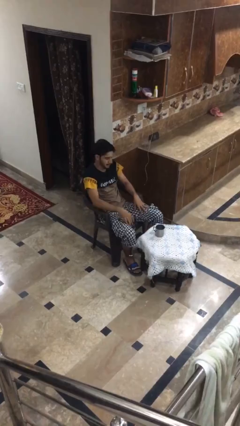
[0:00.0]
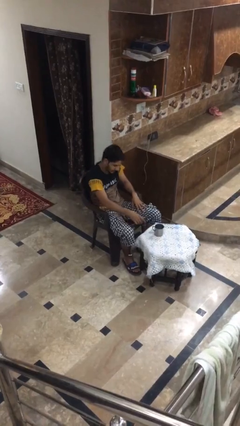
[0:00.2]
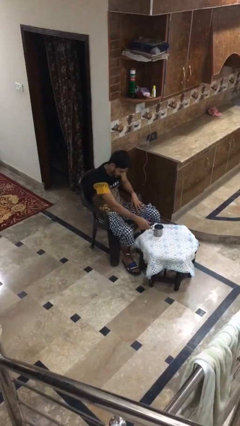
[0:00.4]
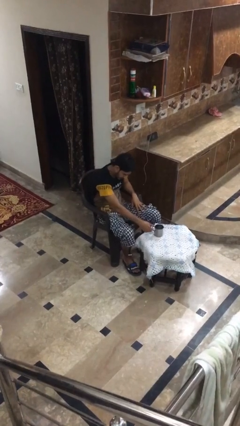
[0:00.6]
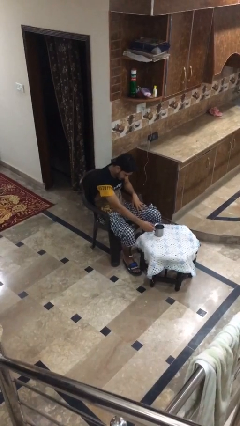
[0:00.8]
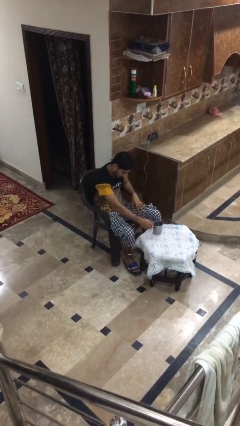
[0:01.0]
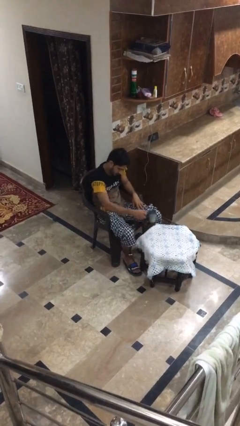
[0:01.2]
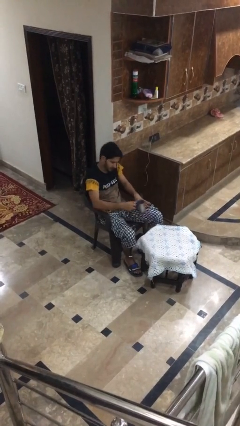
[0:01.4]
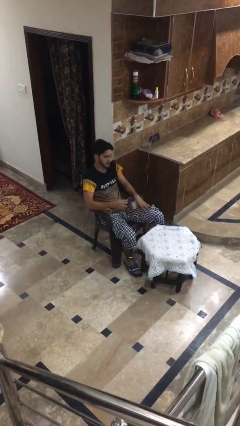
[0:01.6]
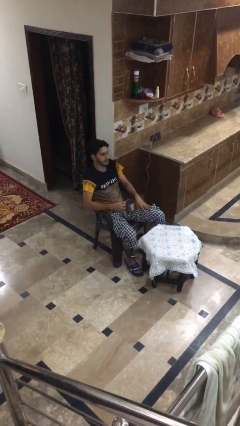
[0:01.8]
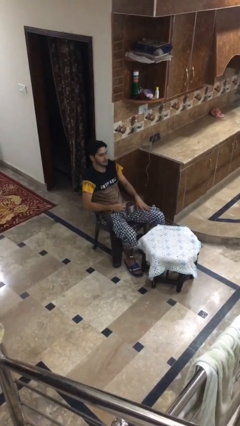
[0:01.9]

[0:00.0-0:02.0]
person picks up object from table

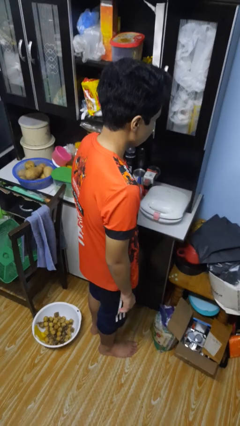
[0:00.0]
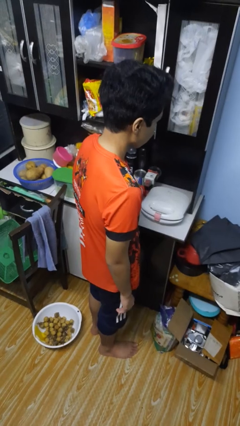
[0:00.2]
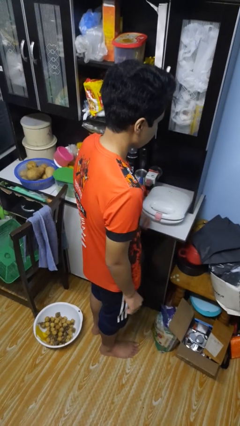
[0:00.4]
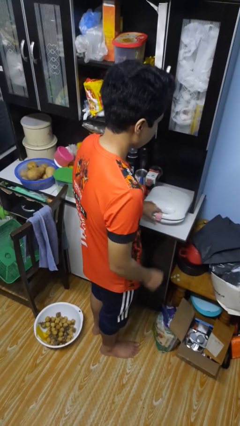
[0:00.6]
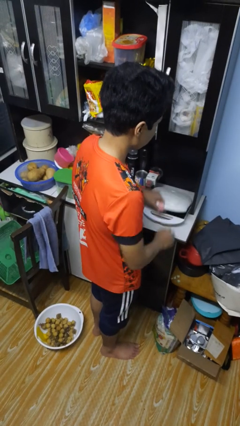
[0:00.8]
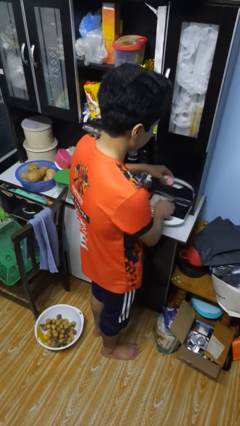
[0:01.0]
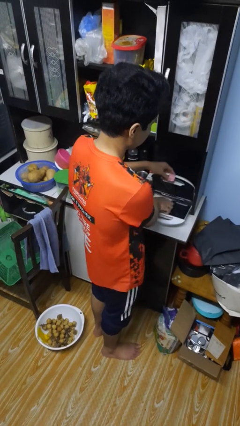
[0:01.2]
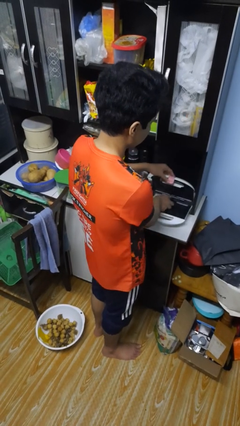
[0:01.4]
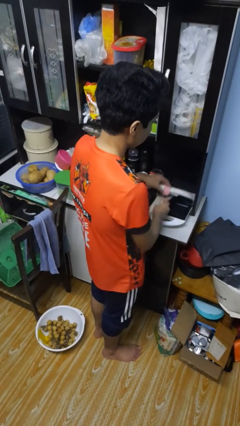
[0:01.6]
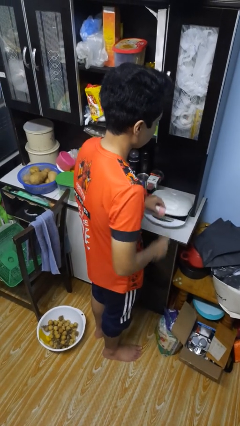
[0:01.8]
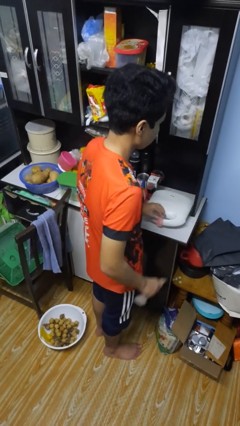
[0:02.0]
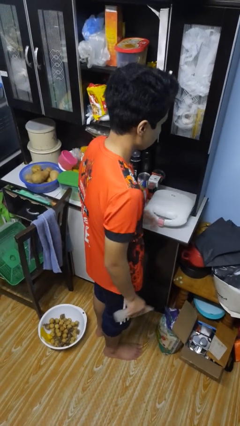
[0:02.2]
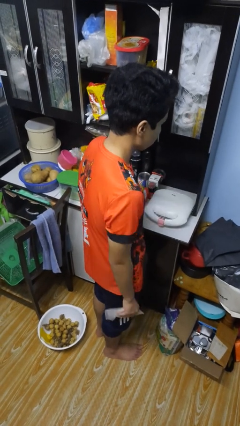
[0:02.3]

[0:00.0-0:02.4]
person takes object from toaster

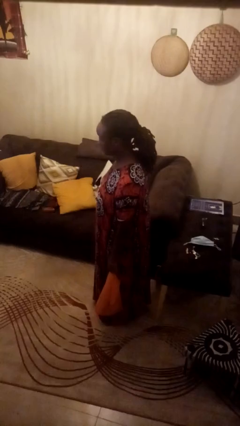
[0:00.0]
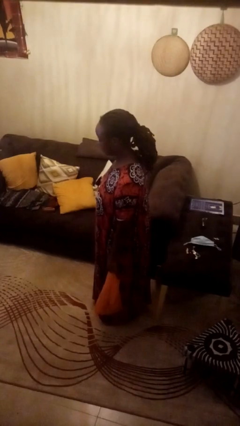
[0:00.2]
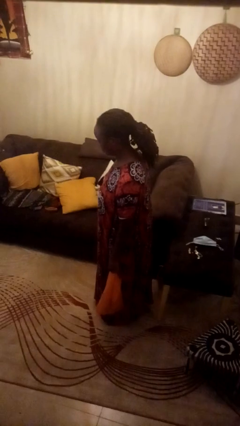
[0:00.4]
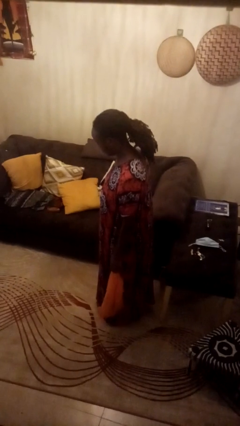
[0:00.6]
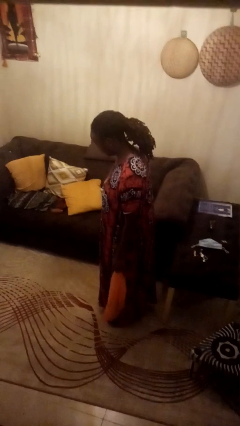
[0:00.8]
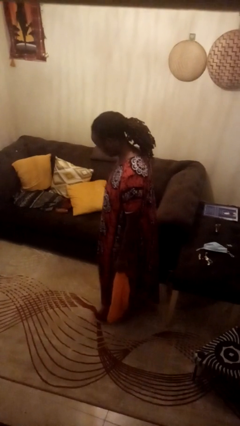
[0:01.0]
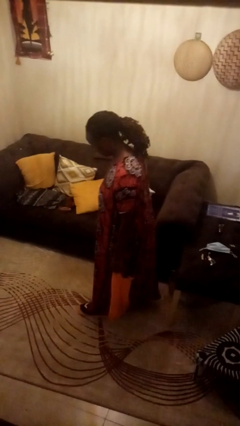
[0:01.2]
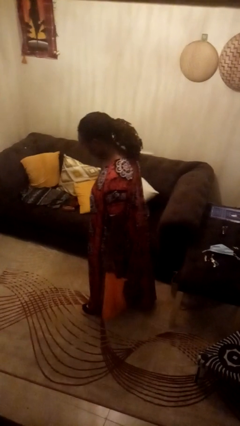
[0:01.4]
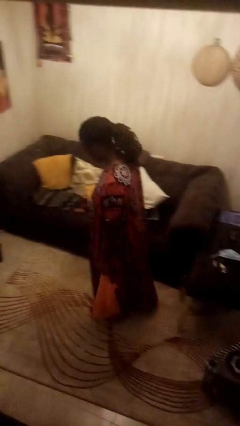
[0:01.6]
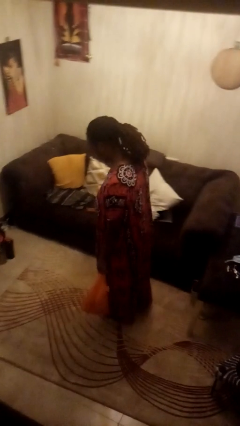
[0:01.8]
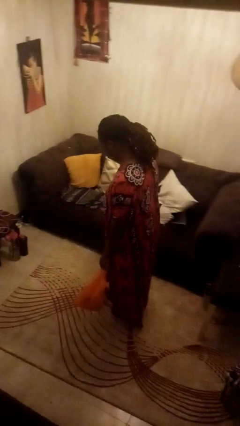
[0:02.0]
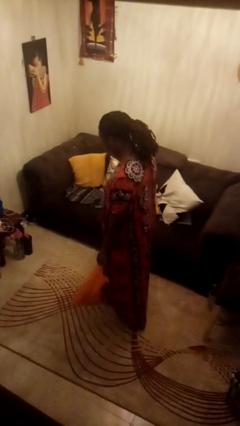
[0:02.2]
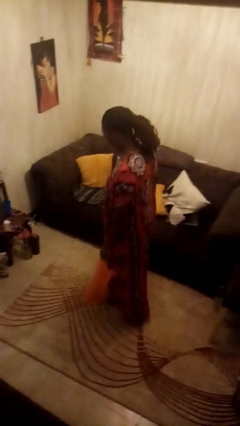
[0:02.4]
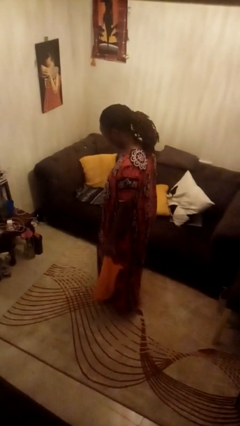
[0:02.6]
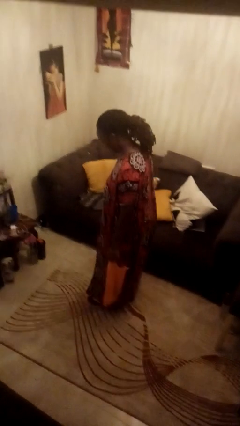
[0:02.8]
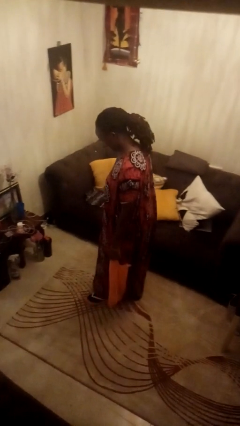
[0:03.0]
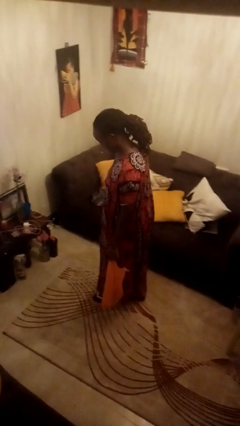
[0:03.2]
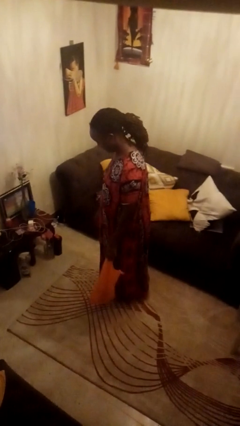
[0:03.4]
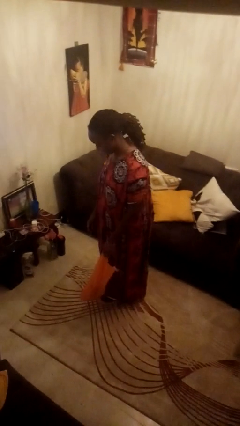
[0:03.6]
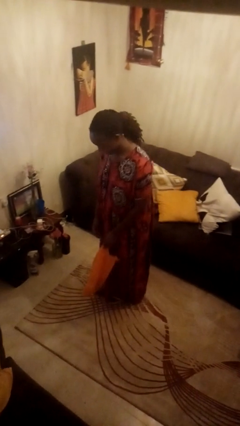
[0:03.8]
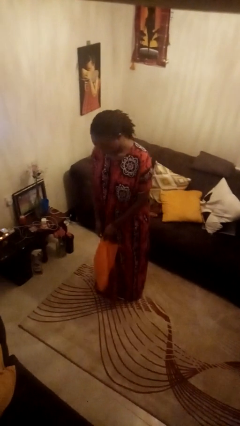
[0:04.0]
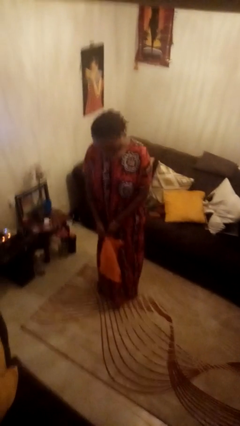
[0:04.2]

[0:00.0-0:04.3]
person carries groceries

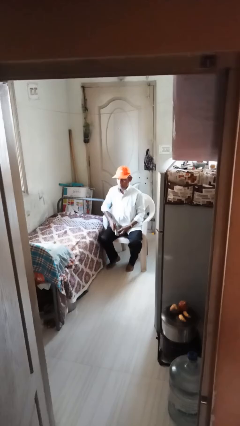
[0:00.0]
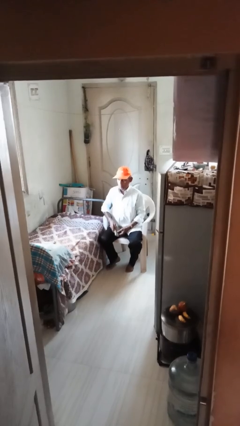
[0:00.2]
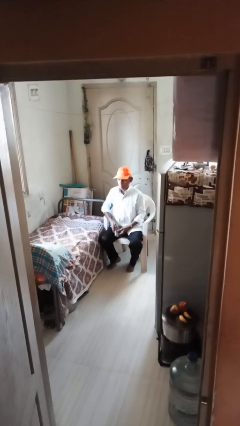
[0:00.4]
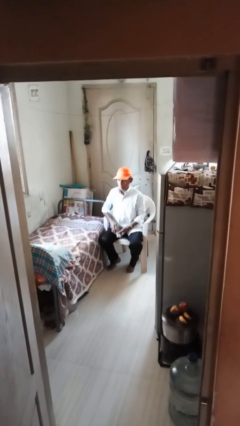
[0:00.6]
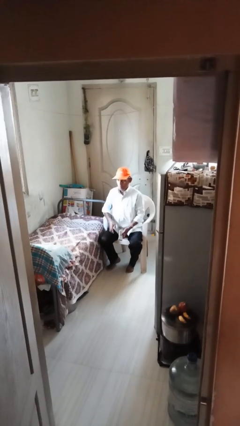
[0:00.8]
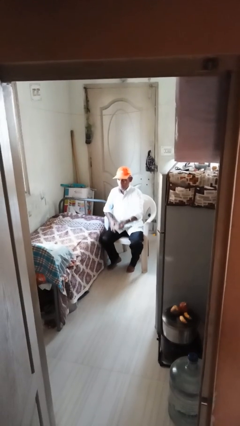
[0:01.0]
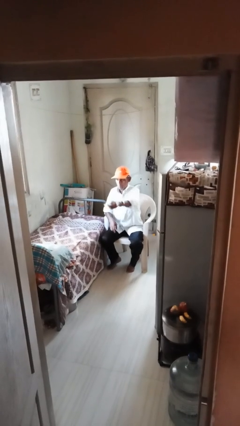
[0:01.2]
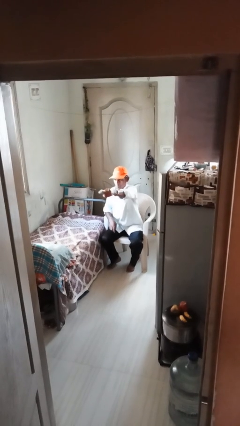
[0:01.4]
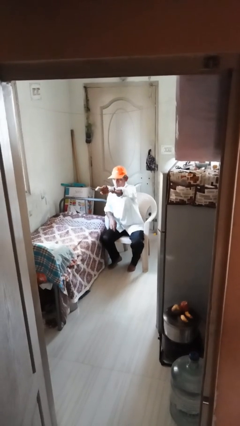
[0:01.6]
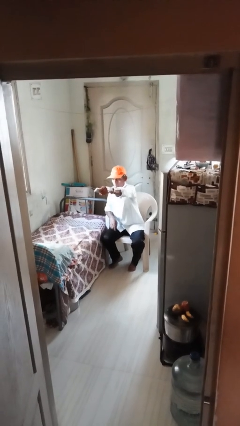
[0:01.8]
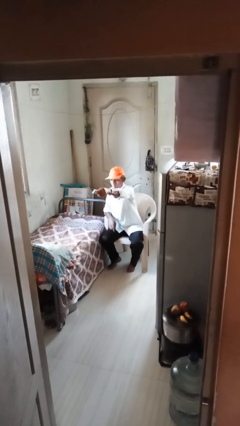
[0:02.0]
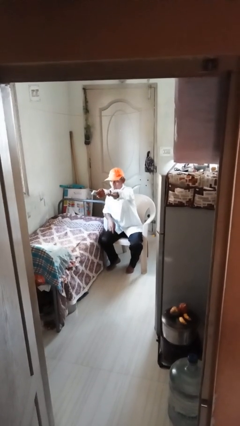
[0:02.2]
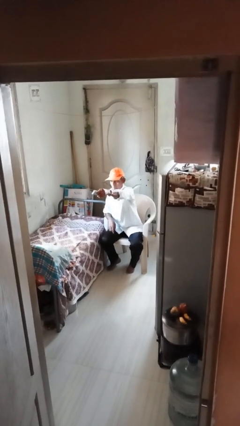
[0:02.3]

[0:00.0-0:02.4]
person uses television remote

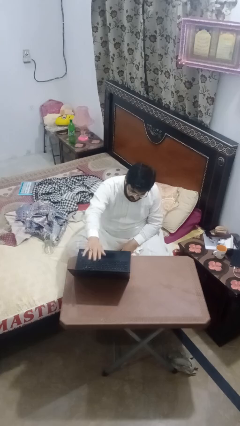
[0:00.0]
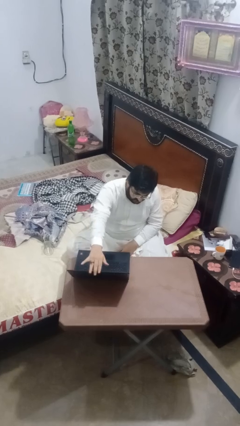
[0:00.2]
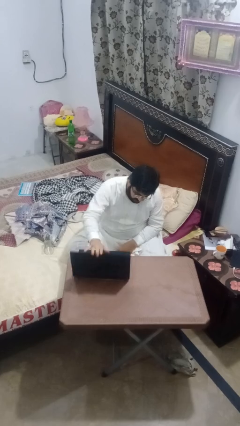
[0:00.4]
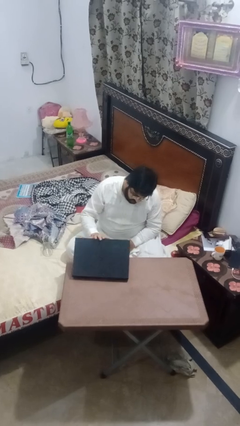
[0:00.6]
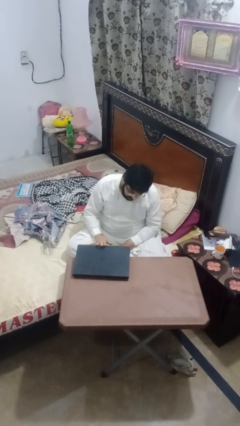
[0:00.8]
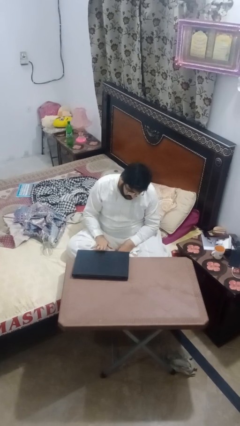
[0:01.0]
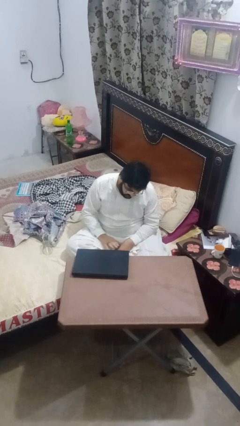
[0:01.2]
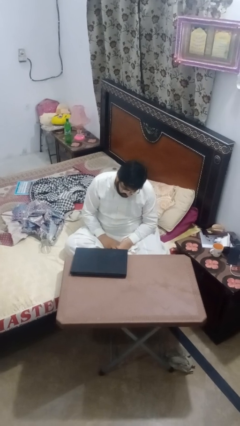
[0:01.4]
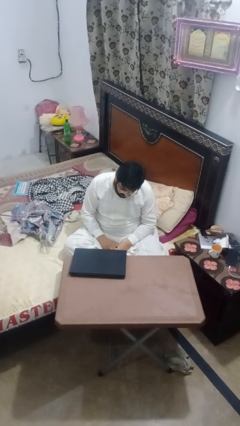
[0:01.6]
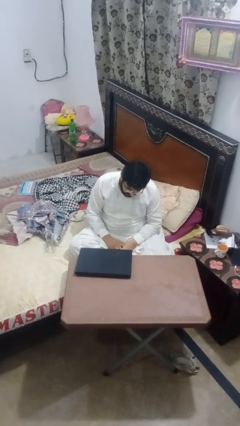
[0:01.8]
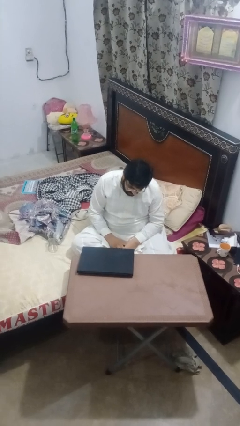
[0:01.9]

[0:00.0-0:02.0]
person closes laptop

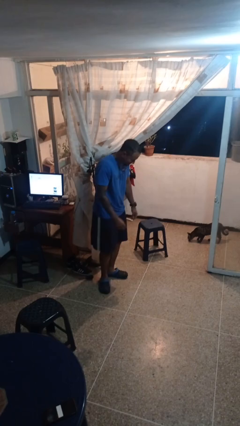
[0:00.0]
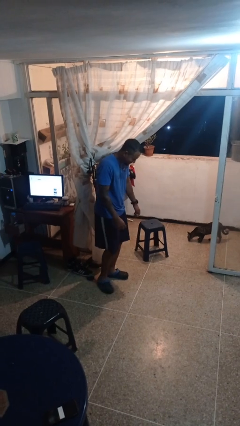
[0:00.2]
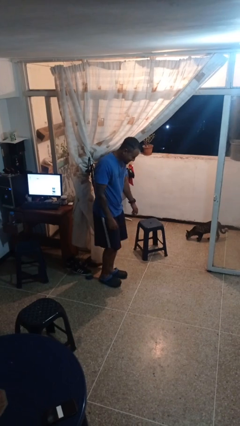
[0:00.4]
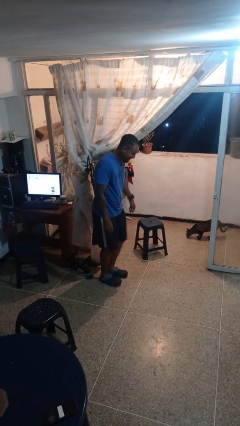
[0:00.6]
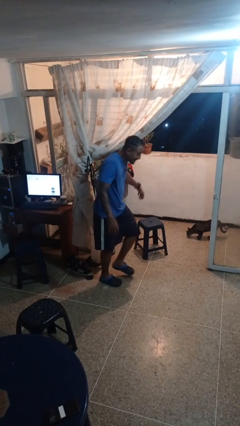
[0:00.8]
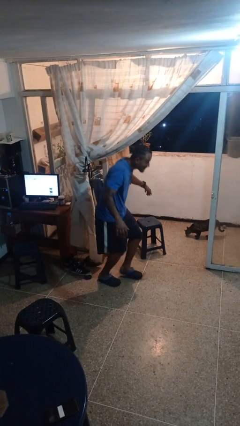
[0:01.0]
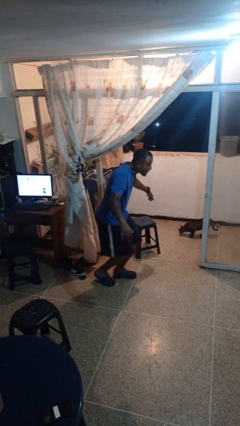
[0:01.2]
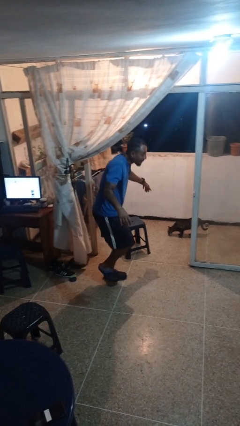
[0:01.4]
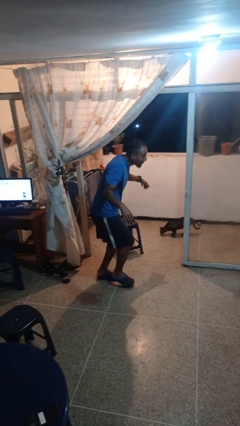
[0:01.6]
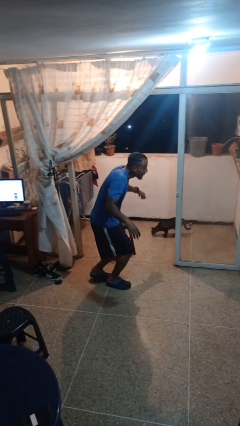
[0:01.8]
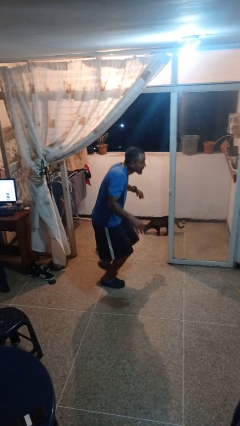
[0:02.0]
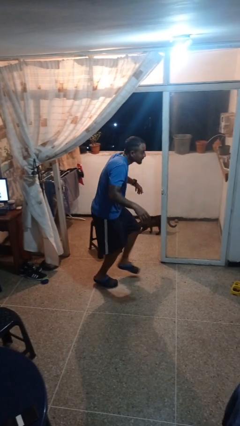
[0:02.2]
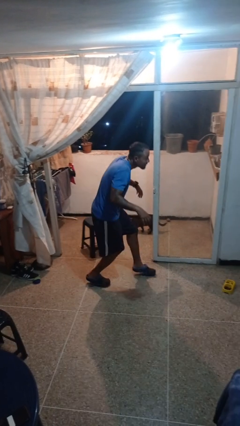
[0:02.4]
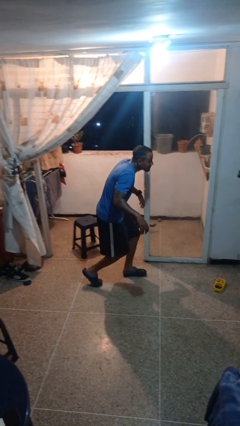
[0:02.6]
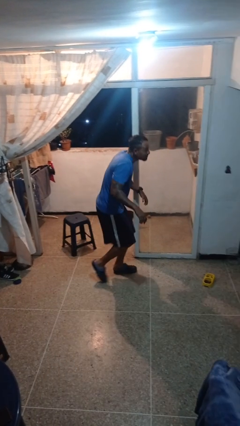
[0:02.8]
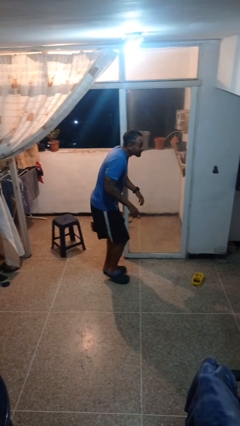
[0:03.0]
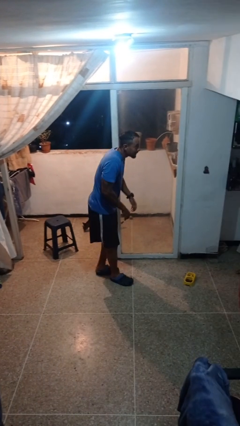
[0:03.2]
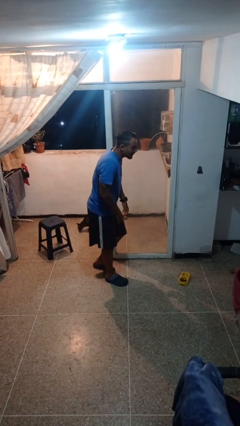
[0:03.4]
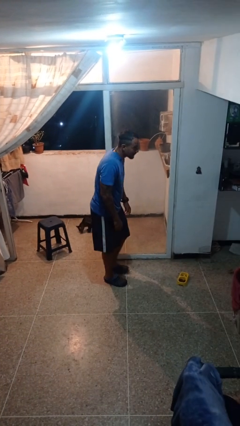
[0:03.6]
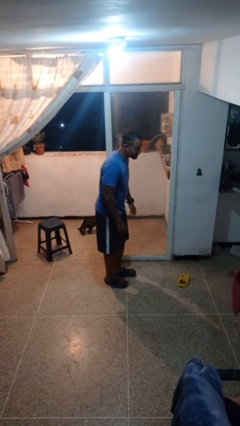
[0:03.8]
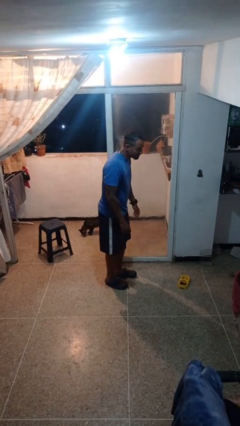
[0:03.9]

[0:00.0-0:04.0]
person walks tiptoe
